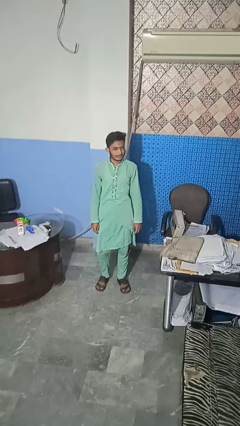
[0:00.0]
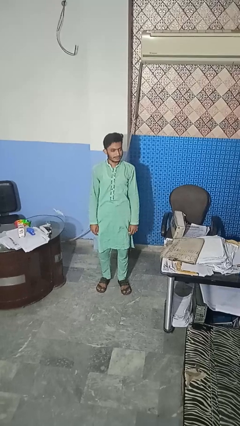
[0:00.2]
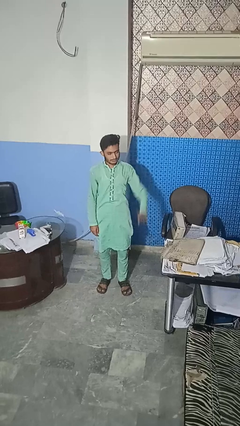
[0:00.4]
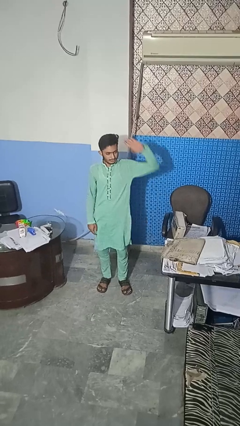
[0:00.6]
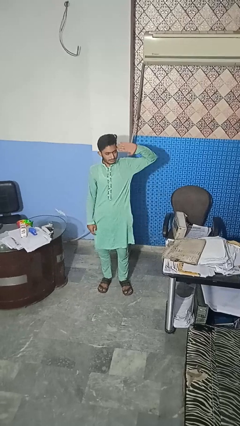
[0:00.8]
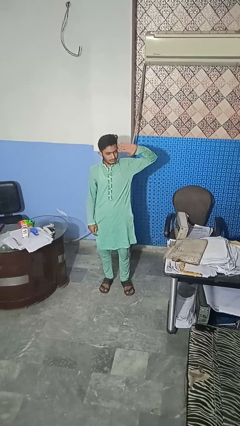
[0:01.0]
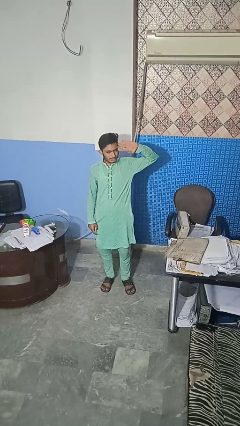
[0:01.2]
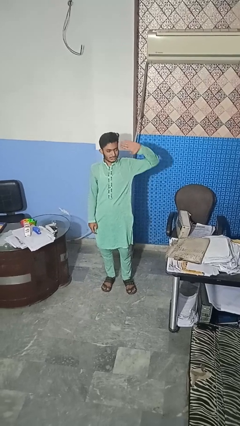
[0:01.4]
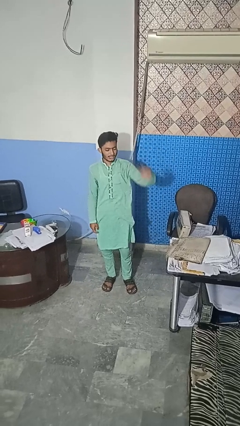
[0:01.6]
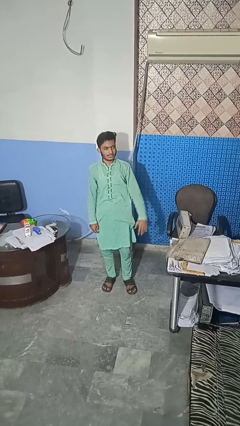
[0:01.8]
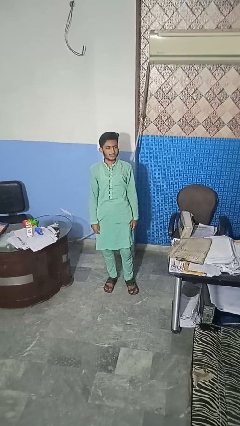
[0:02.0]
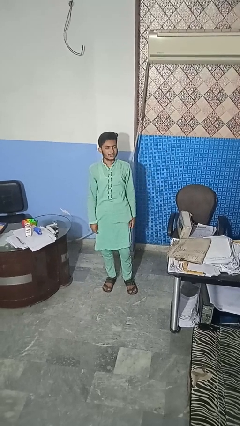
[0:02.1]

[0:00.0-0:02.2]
person salutes

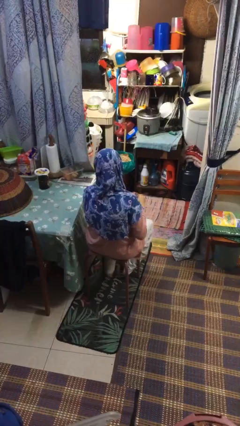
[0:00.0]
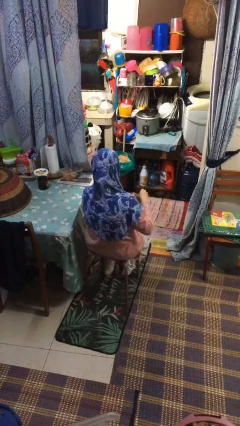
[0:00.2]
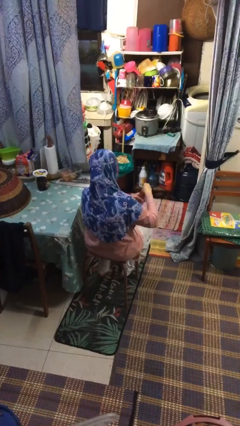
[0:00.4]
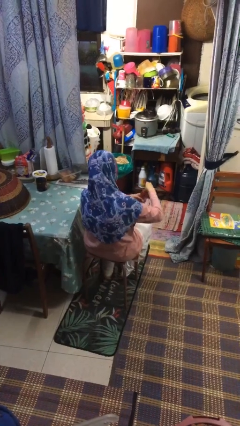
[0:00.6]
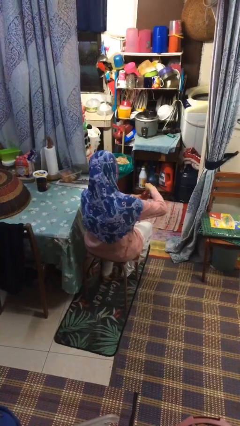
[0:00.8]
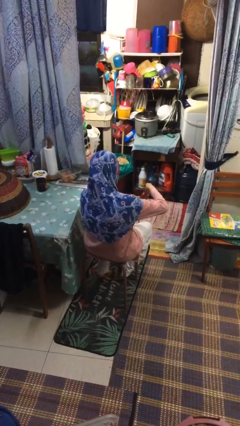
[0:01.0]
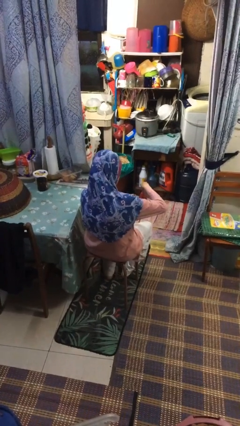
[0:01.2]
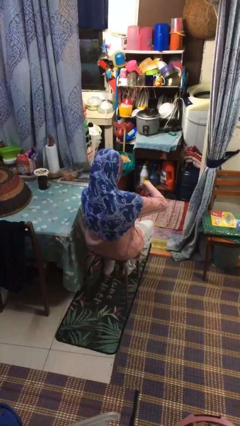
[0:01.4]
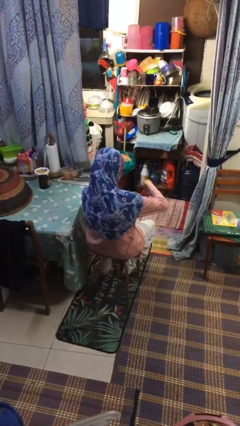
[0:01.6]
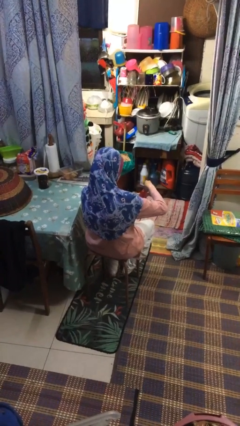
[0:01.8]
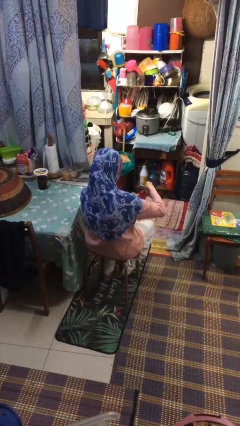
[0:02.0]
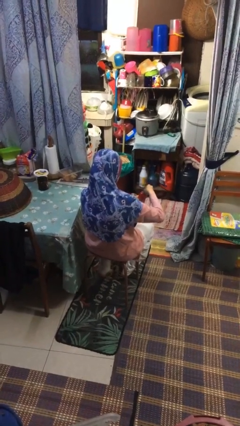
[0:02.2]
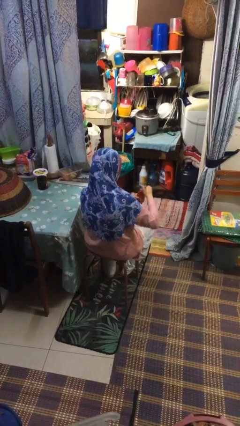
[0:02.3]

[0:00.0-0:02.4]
person opens beverage can

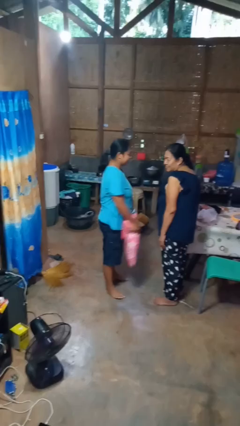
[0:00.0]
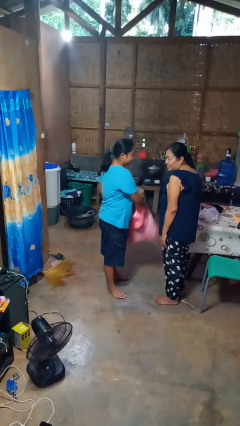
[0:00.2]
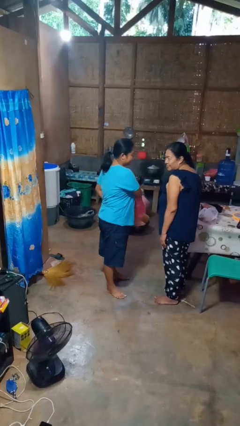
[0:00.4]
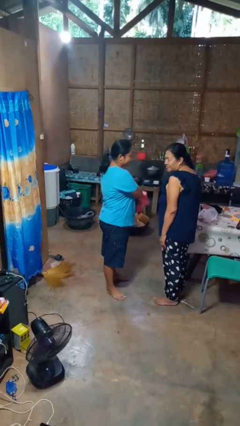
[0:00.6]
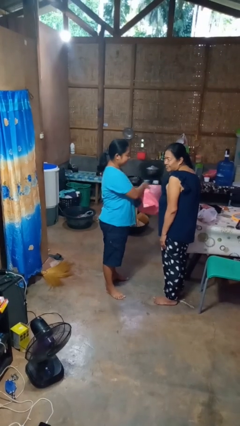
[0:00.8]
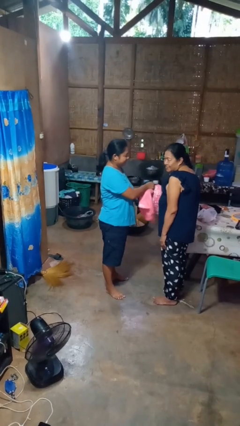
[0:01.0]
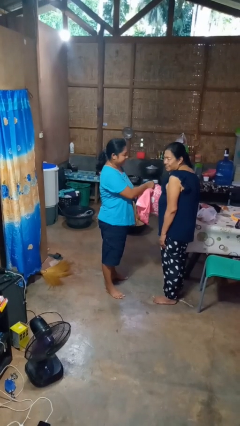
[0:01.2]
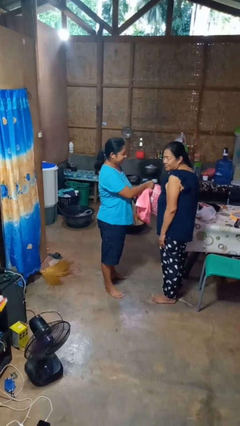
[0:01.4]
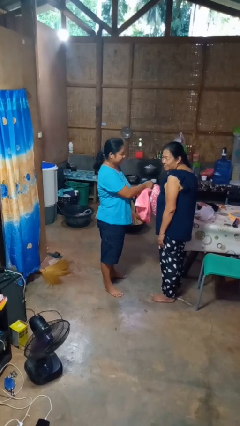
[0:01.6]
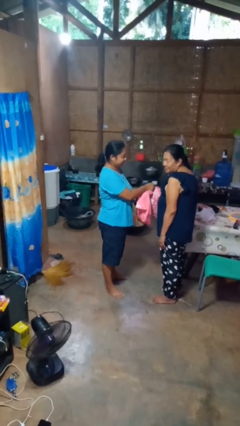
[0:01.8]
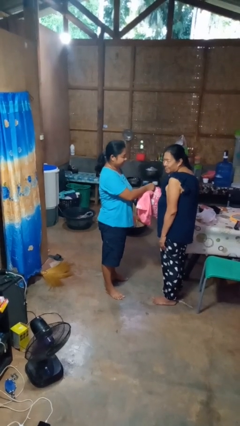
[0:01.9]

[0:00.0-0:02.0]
person hits person with pillow

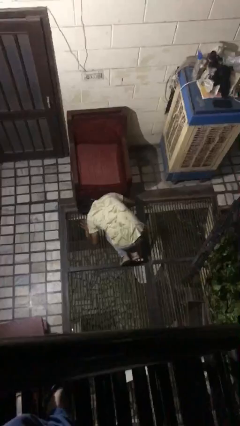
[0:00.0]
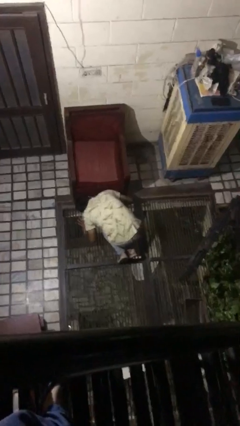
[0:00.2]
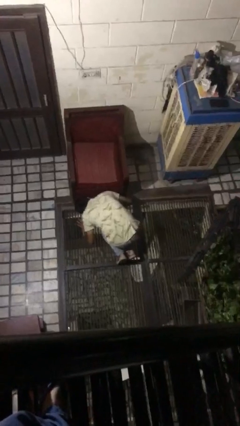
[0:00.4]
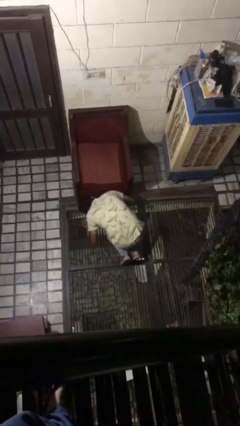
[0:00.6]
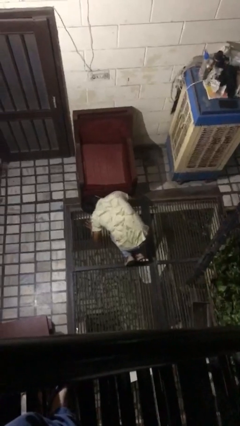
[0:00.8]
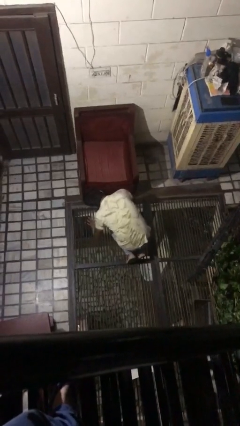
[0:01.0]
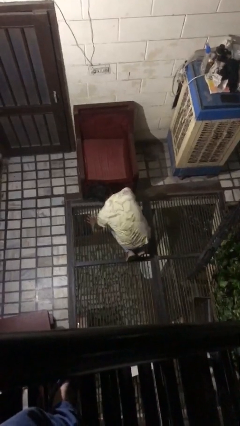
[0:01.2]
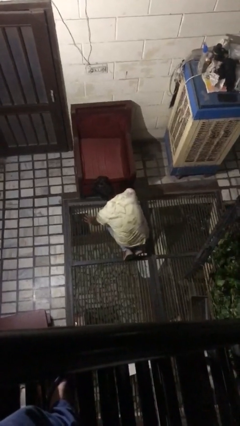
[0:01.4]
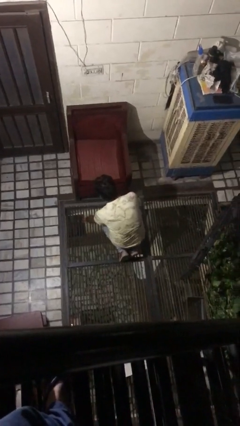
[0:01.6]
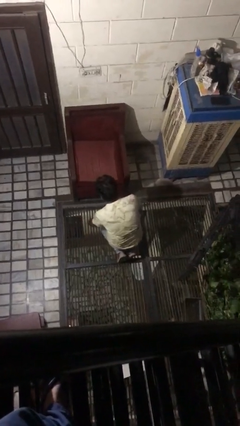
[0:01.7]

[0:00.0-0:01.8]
person searches under couch

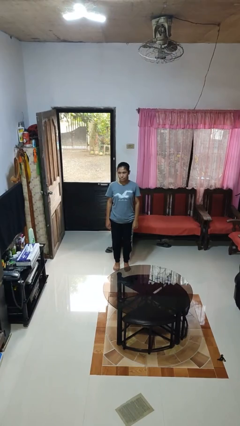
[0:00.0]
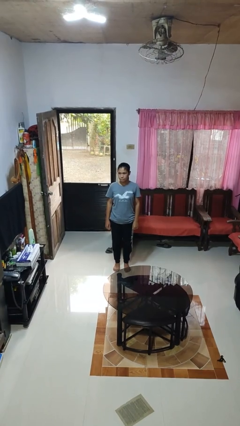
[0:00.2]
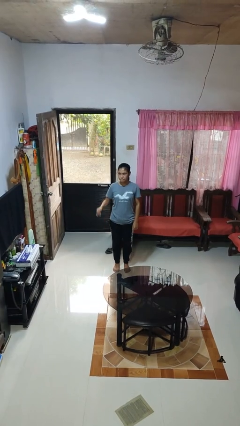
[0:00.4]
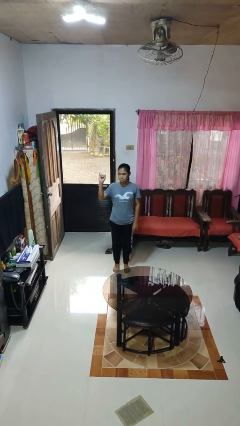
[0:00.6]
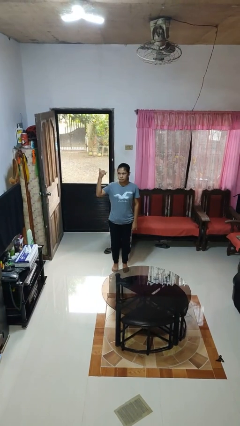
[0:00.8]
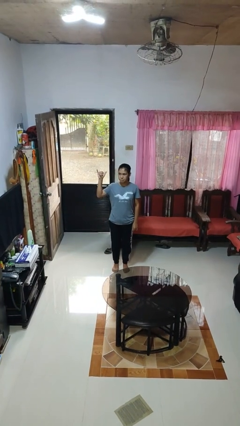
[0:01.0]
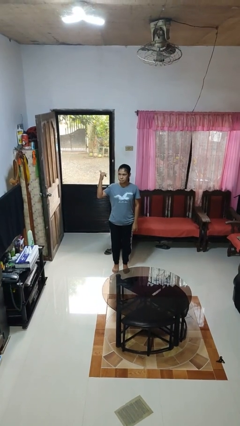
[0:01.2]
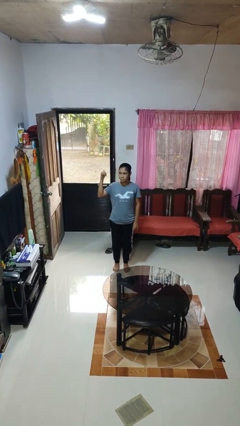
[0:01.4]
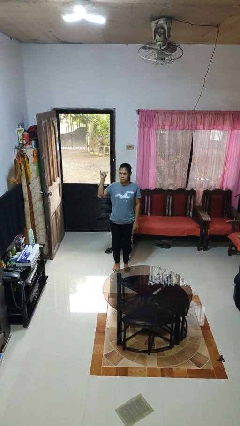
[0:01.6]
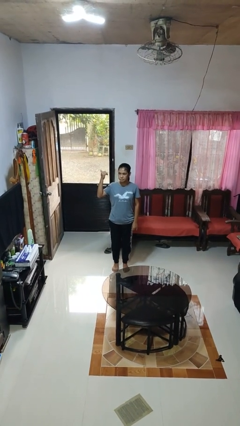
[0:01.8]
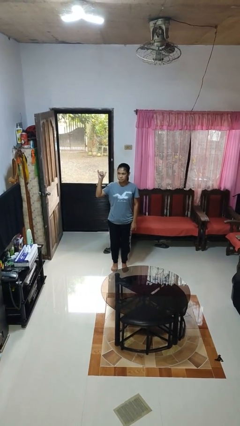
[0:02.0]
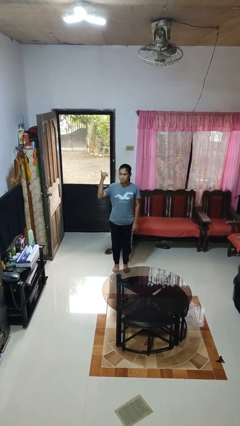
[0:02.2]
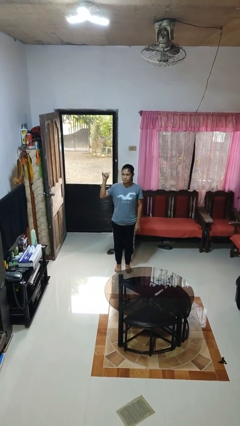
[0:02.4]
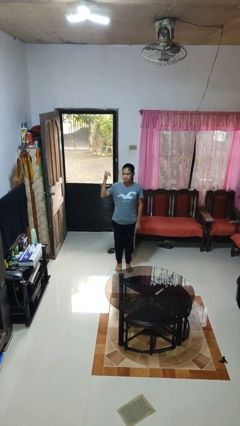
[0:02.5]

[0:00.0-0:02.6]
person gestures hang loose

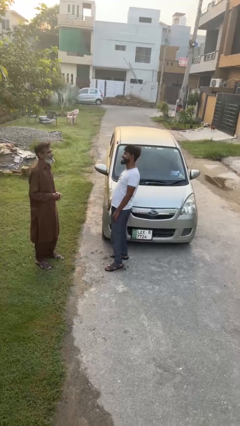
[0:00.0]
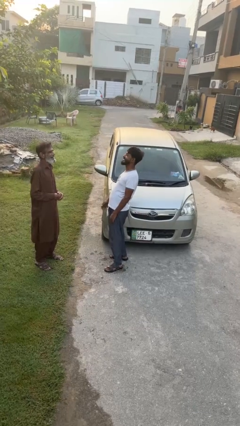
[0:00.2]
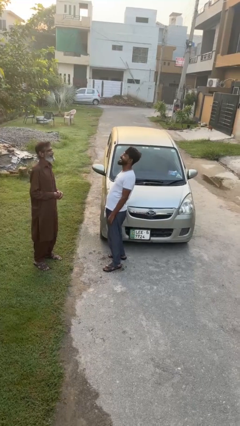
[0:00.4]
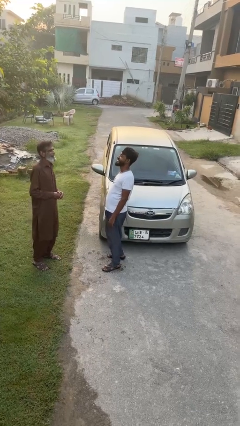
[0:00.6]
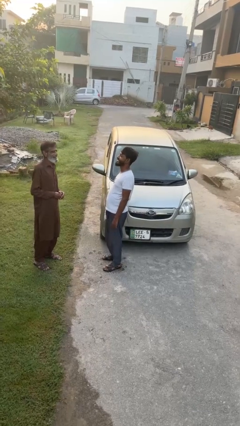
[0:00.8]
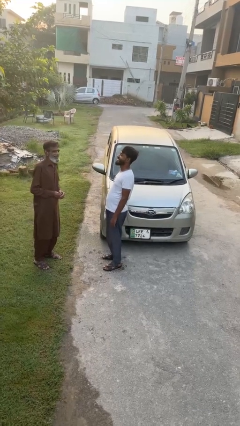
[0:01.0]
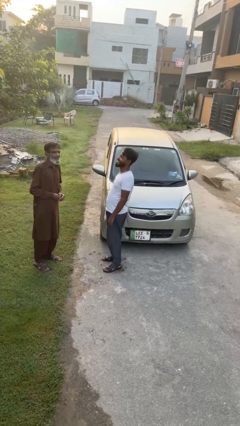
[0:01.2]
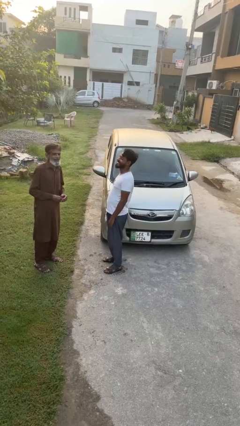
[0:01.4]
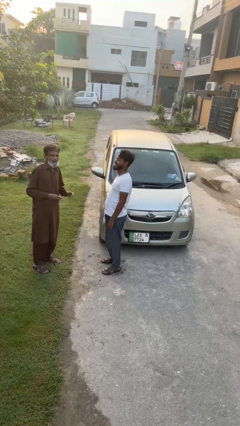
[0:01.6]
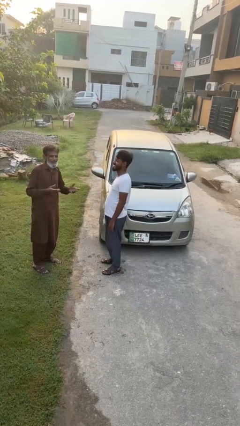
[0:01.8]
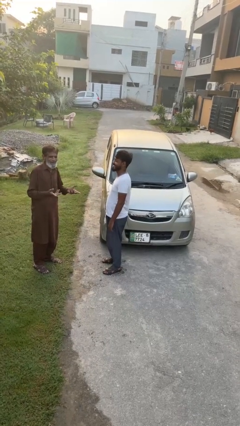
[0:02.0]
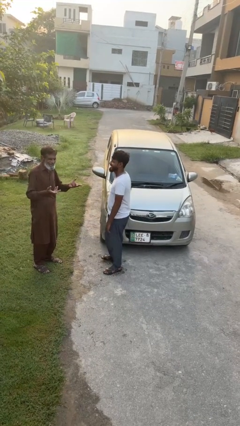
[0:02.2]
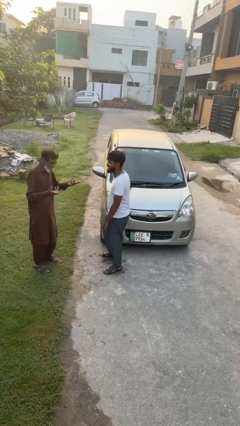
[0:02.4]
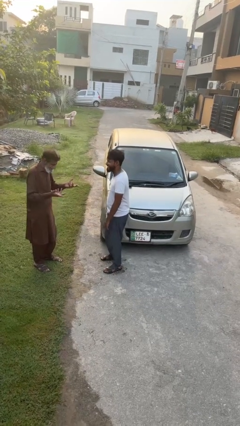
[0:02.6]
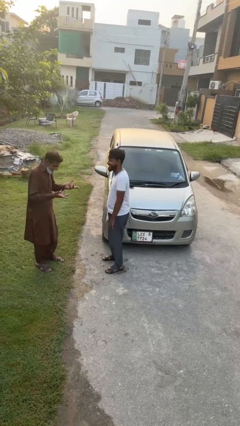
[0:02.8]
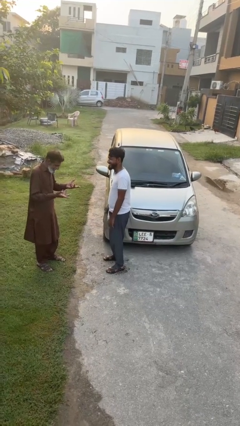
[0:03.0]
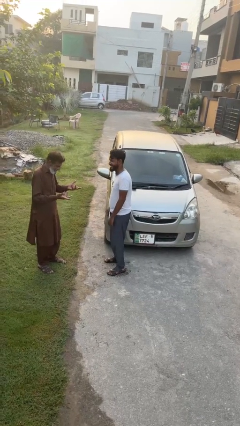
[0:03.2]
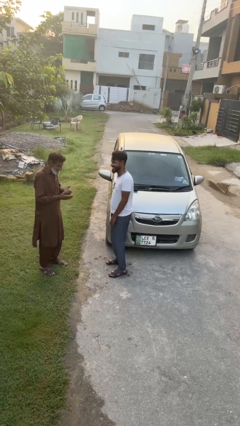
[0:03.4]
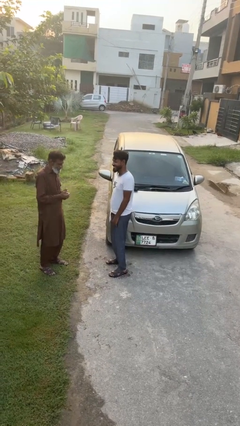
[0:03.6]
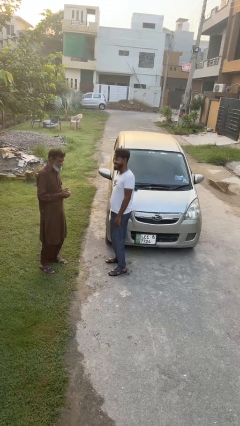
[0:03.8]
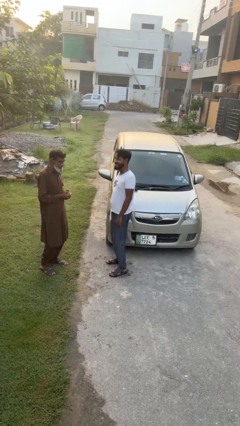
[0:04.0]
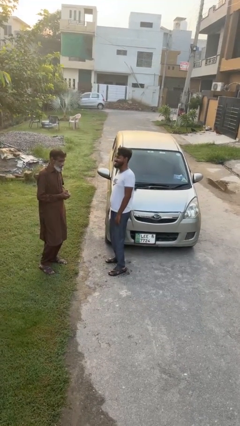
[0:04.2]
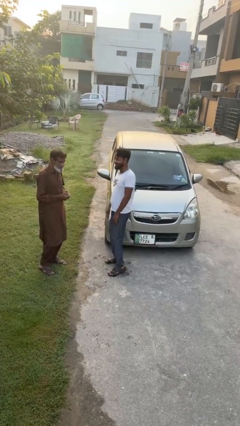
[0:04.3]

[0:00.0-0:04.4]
person laughs with person

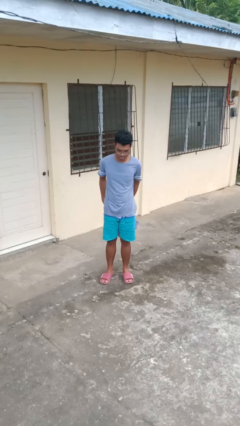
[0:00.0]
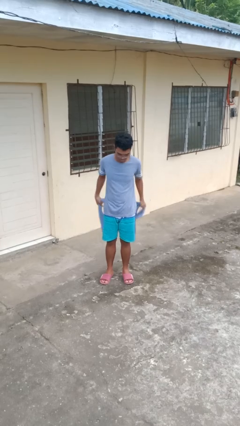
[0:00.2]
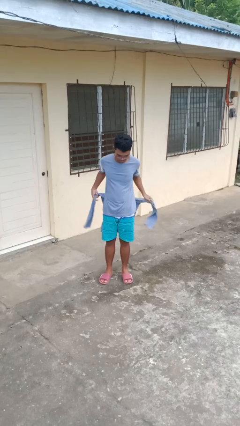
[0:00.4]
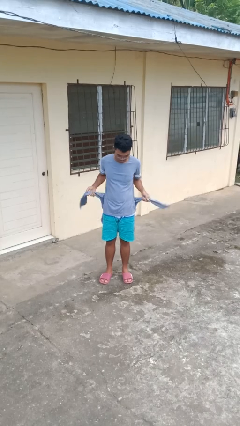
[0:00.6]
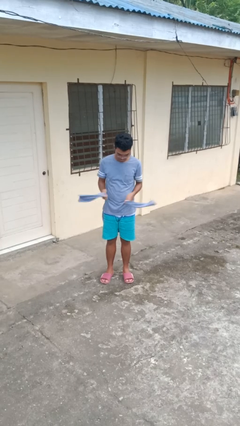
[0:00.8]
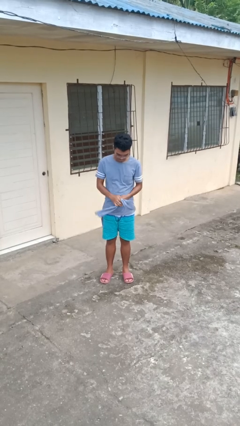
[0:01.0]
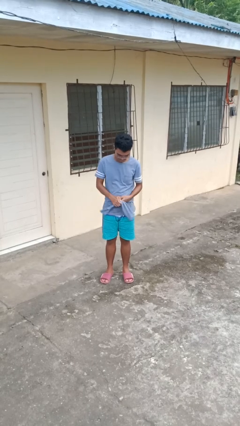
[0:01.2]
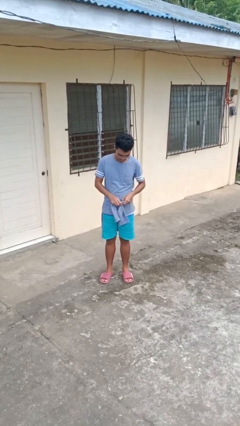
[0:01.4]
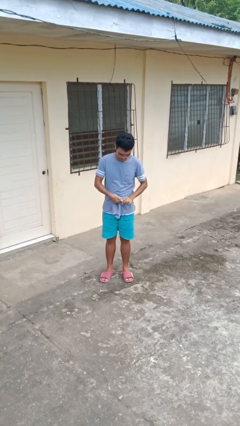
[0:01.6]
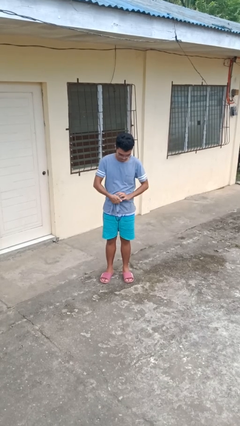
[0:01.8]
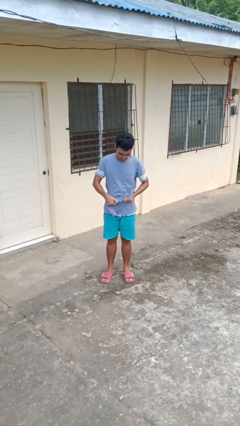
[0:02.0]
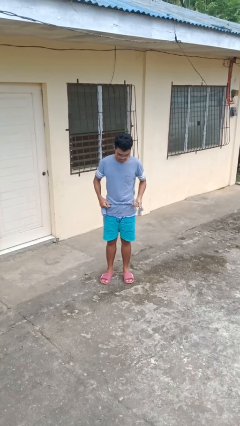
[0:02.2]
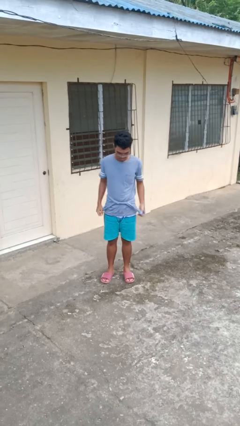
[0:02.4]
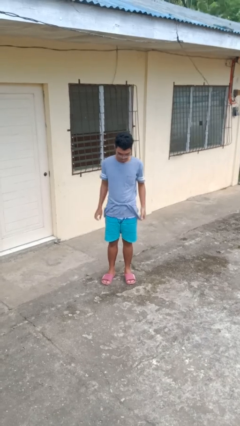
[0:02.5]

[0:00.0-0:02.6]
person ties jacket around waist
